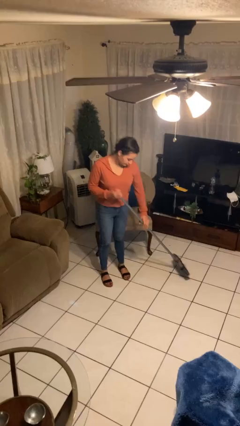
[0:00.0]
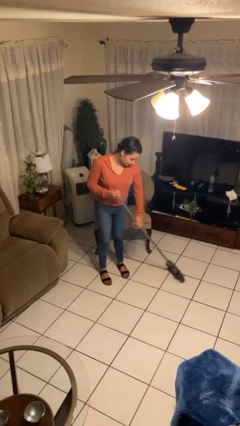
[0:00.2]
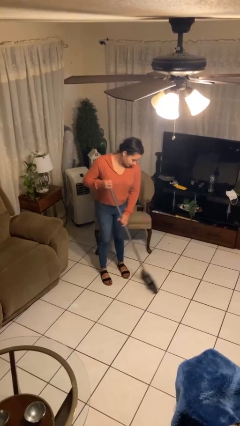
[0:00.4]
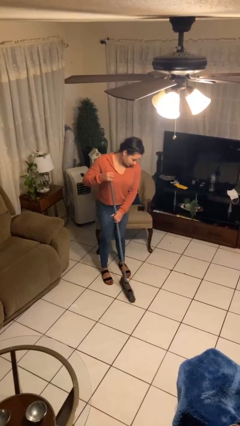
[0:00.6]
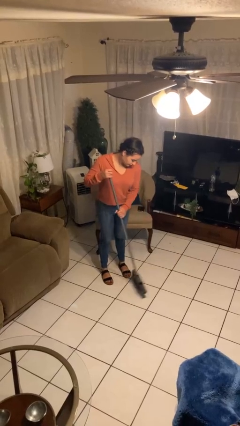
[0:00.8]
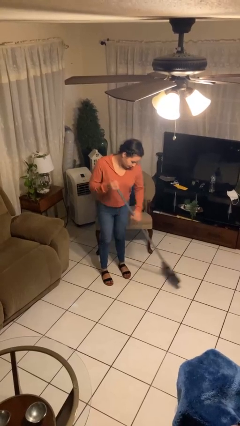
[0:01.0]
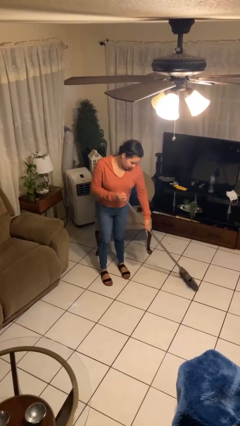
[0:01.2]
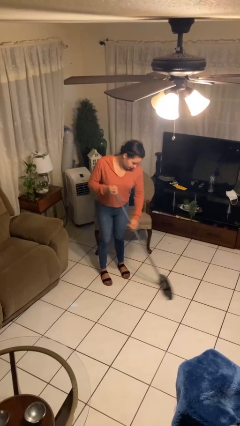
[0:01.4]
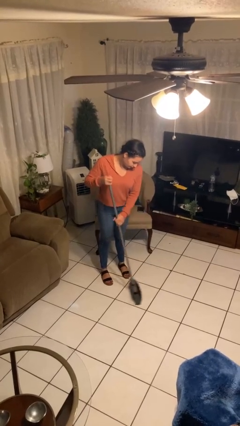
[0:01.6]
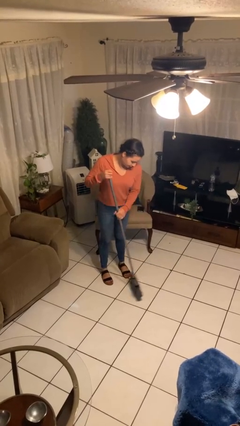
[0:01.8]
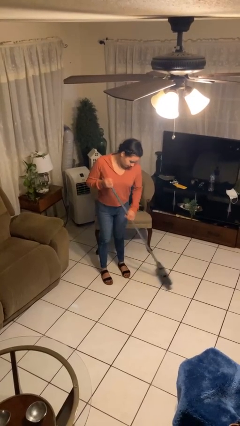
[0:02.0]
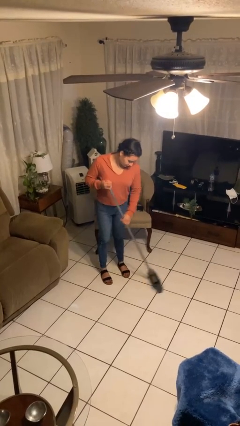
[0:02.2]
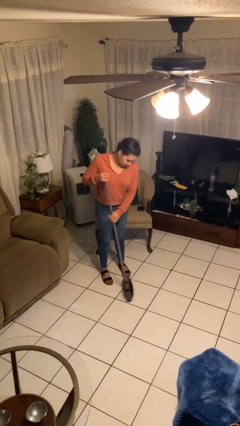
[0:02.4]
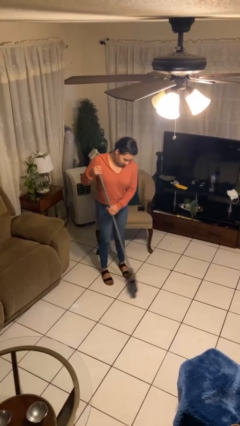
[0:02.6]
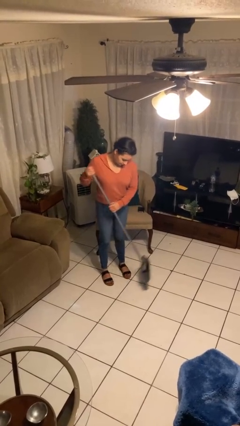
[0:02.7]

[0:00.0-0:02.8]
person sweeps floor

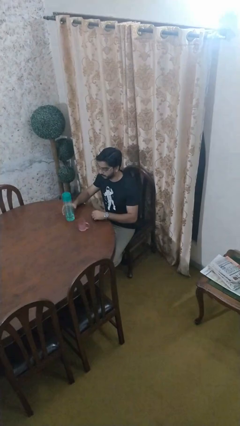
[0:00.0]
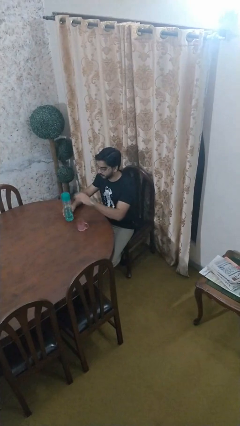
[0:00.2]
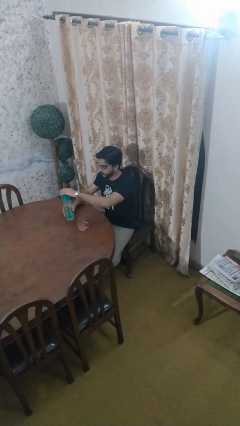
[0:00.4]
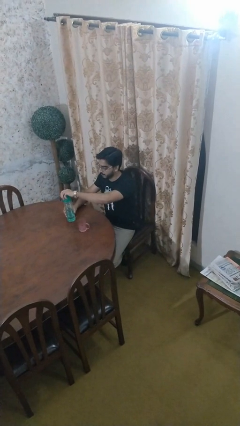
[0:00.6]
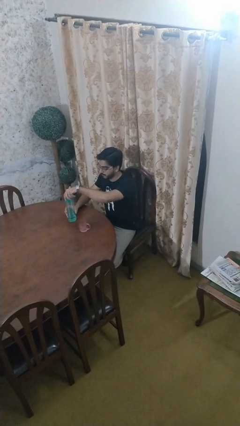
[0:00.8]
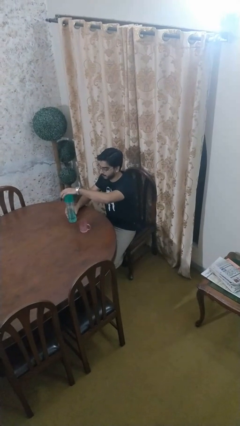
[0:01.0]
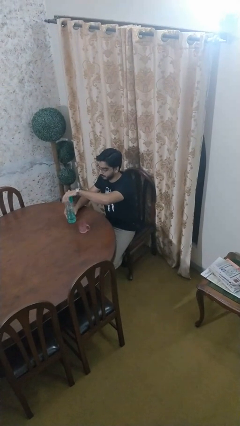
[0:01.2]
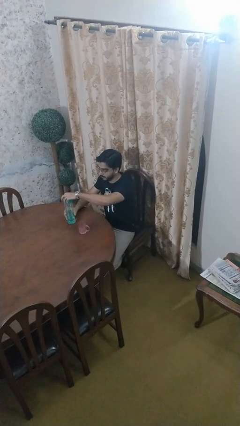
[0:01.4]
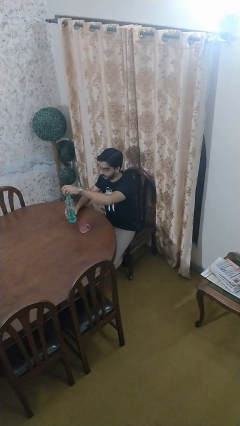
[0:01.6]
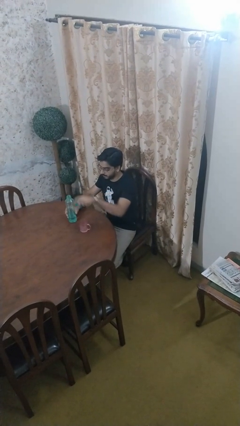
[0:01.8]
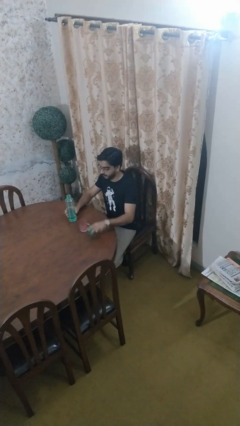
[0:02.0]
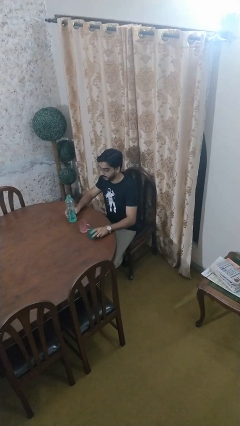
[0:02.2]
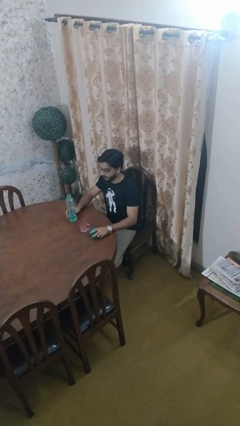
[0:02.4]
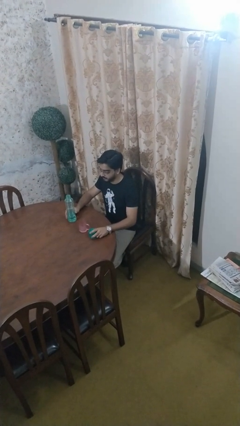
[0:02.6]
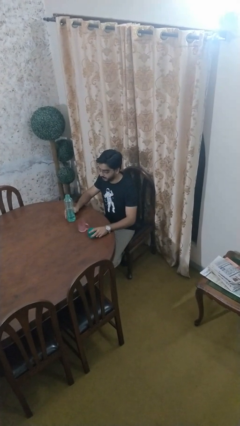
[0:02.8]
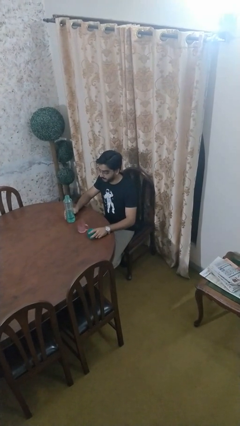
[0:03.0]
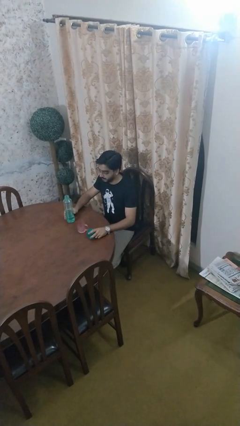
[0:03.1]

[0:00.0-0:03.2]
person unscrews lid from bottle

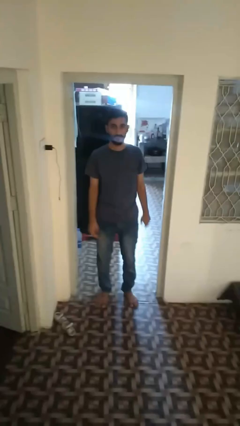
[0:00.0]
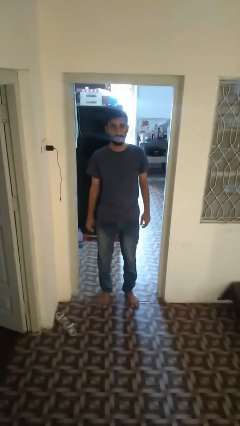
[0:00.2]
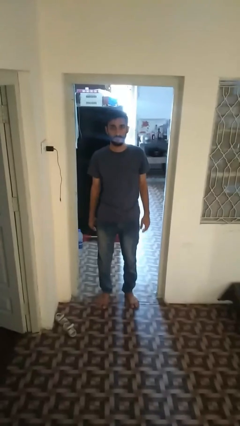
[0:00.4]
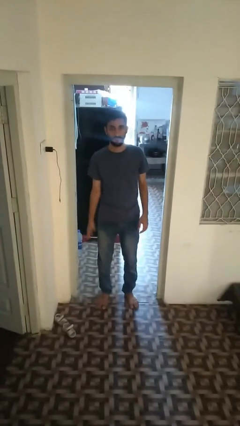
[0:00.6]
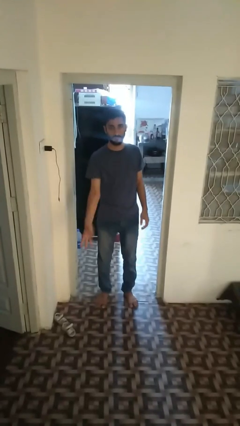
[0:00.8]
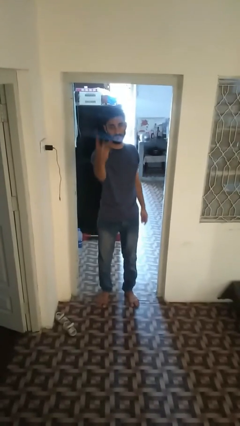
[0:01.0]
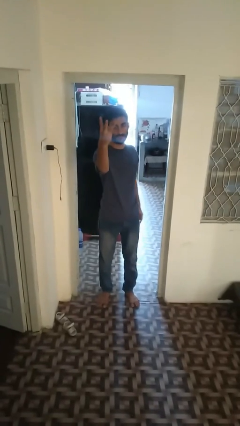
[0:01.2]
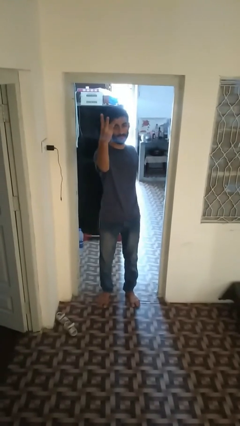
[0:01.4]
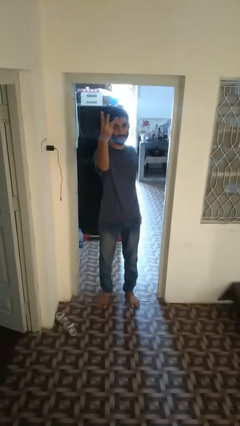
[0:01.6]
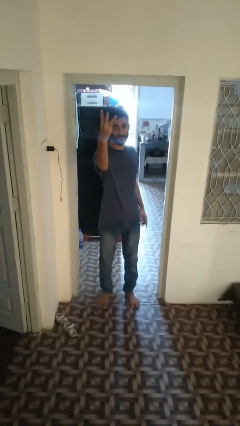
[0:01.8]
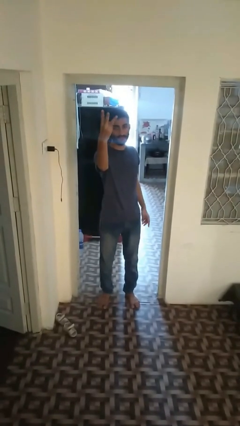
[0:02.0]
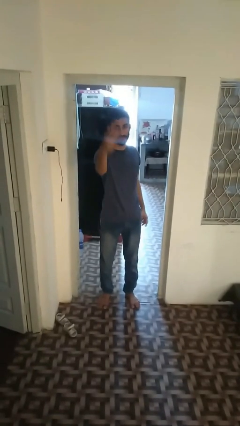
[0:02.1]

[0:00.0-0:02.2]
person gestures number three

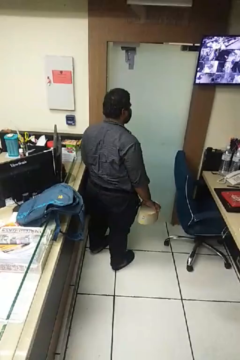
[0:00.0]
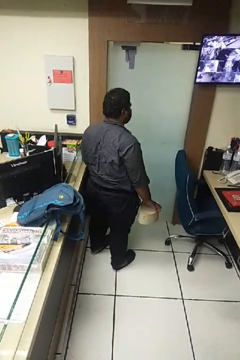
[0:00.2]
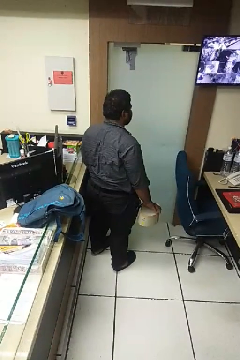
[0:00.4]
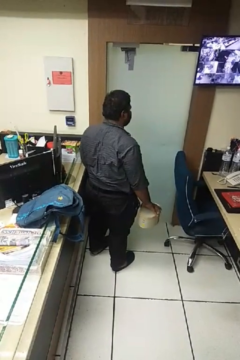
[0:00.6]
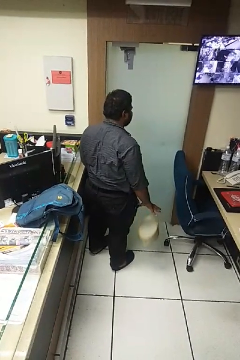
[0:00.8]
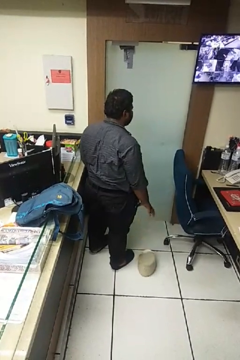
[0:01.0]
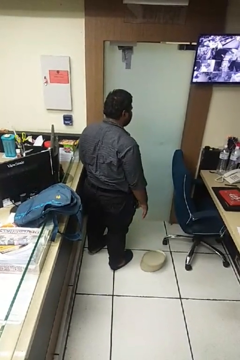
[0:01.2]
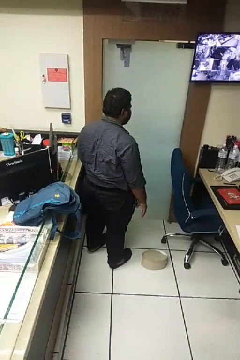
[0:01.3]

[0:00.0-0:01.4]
person drops object

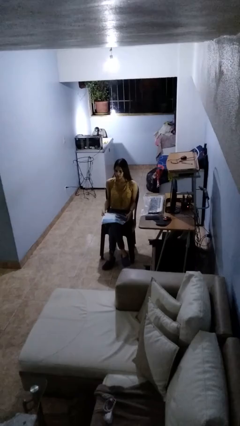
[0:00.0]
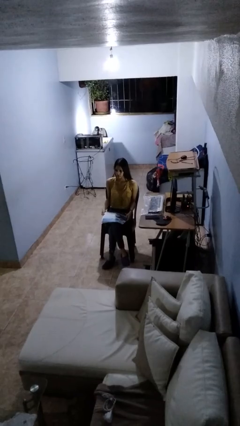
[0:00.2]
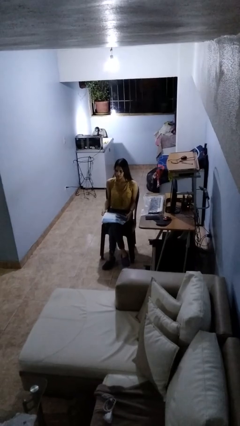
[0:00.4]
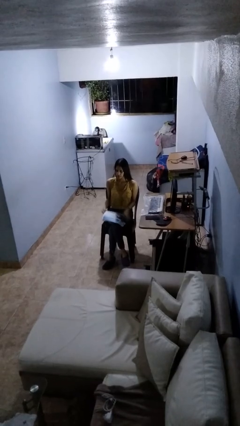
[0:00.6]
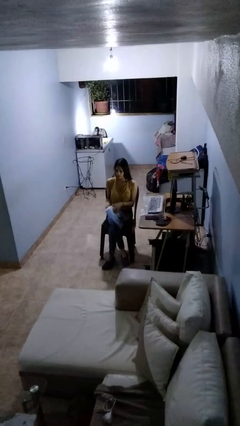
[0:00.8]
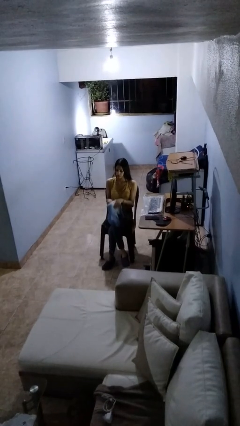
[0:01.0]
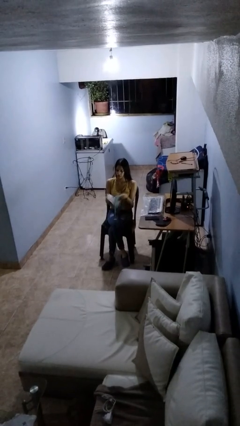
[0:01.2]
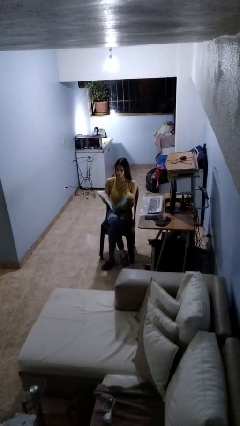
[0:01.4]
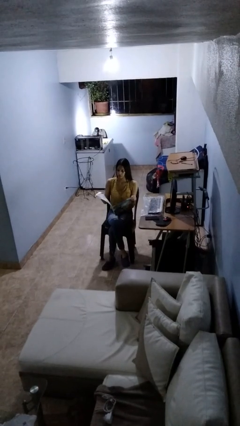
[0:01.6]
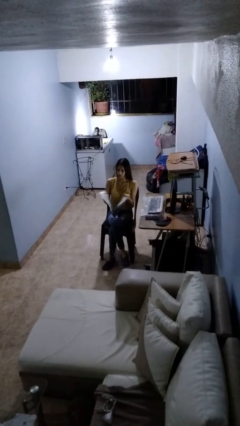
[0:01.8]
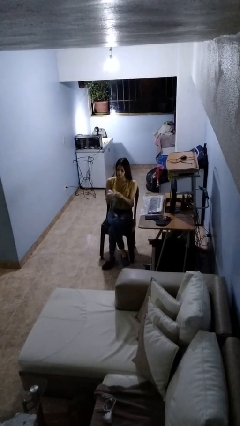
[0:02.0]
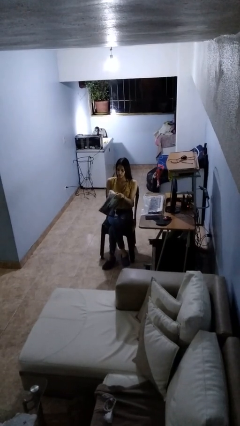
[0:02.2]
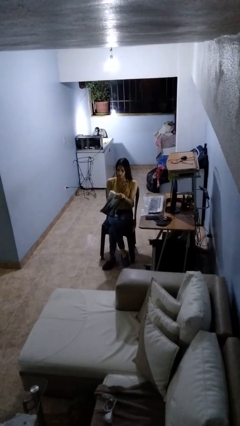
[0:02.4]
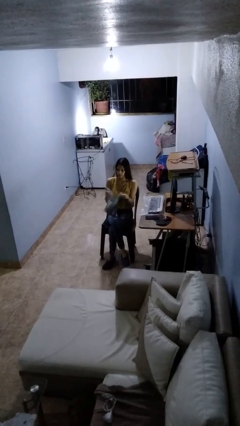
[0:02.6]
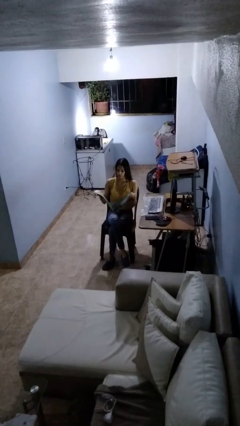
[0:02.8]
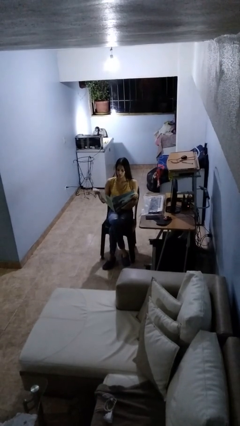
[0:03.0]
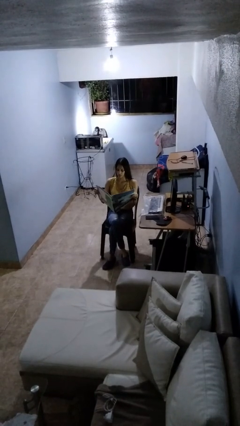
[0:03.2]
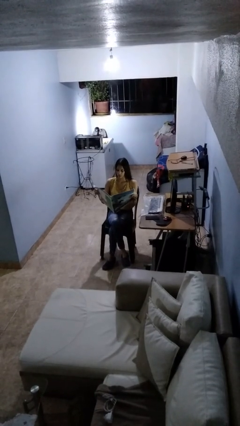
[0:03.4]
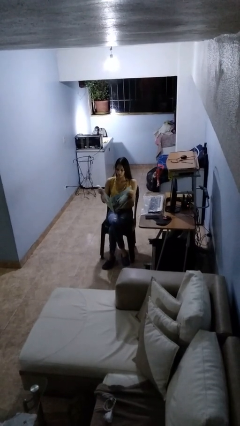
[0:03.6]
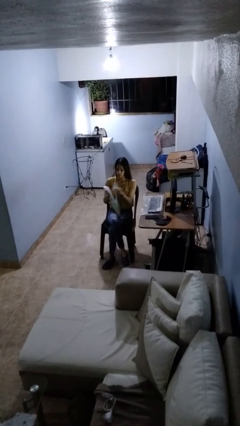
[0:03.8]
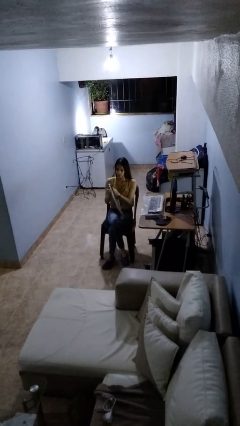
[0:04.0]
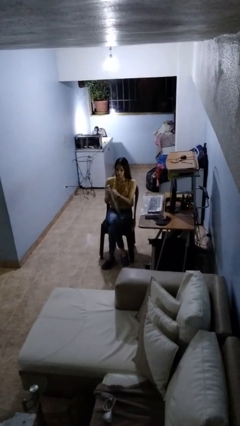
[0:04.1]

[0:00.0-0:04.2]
person reads newspaper

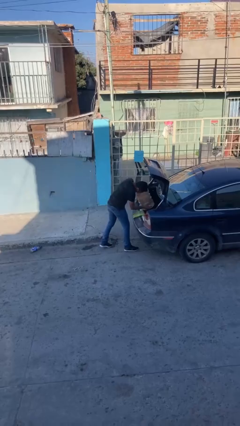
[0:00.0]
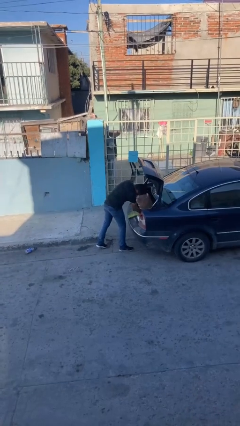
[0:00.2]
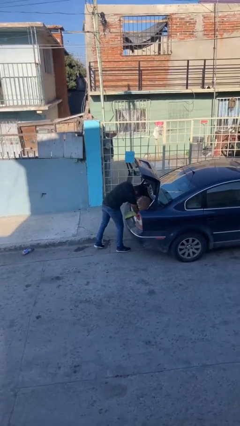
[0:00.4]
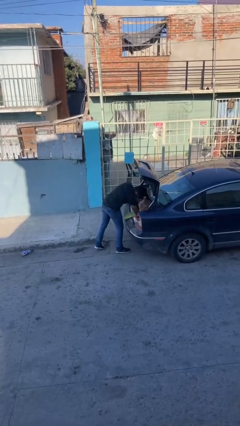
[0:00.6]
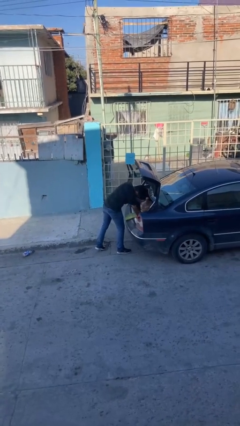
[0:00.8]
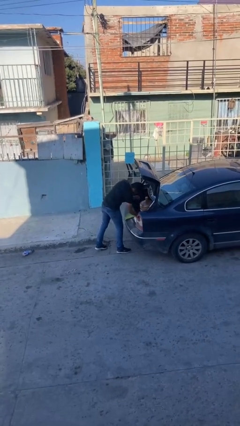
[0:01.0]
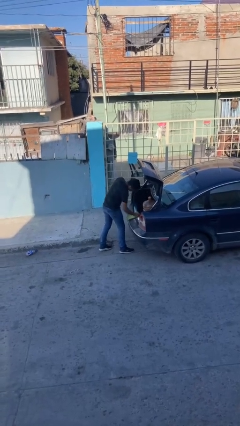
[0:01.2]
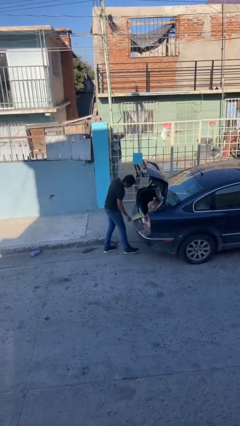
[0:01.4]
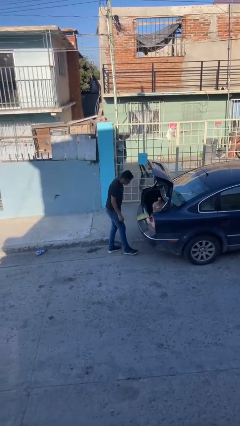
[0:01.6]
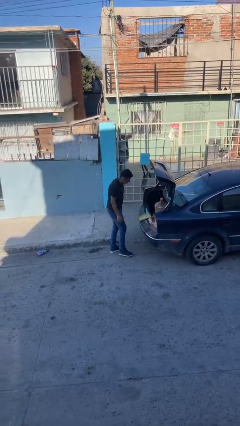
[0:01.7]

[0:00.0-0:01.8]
person loads car

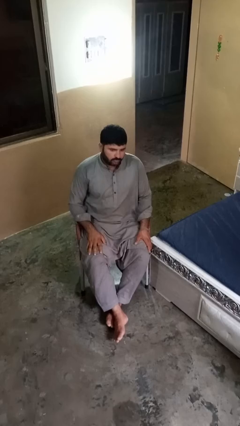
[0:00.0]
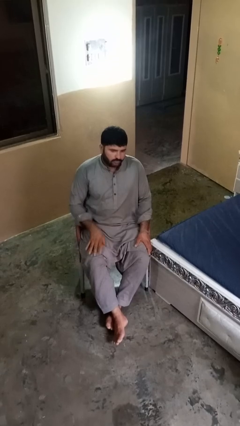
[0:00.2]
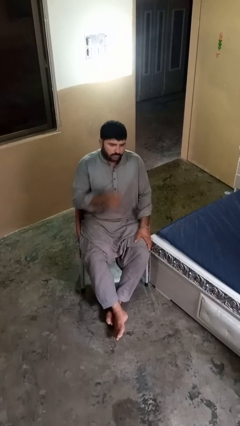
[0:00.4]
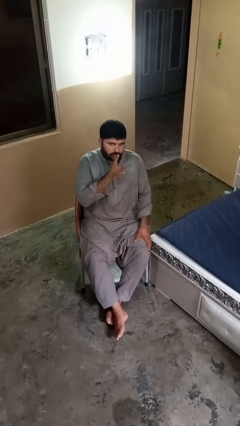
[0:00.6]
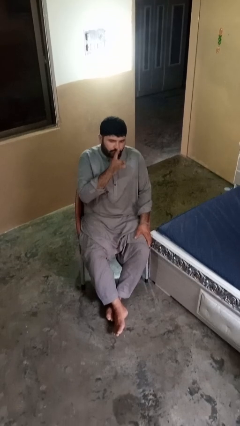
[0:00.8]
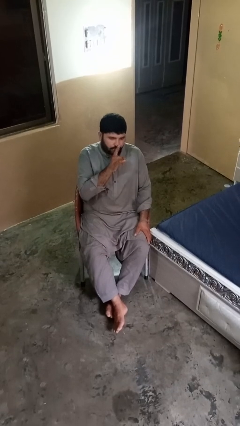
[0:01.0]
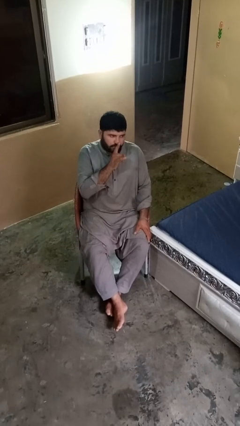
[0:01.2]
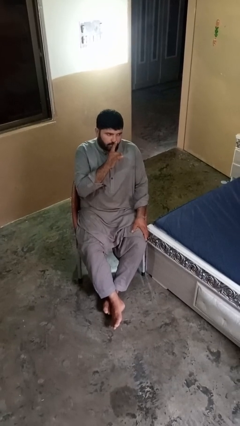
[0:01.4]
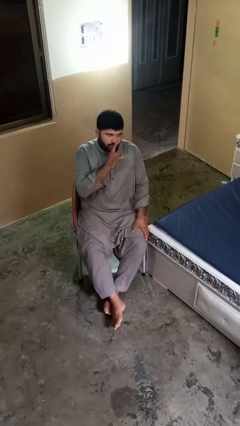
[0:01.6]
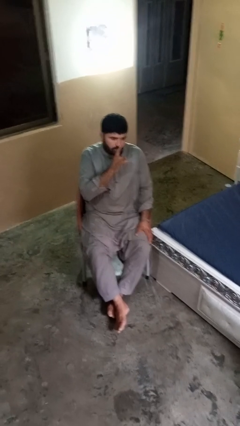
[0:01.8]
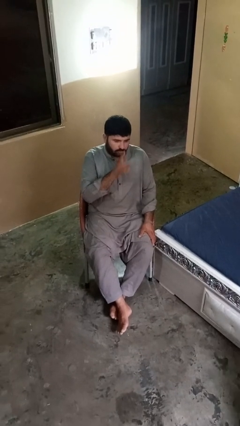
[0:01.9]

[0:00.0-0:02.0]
person gestures be quiet
